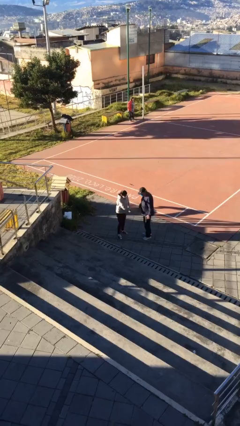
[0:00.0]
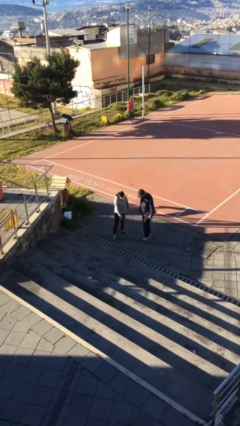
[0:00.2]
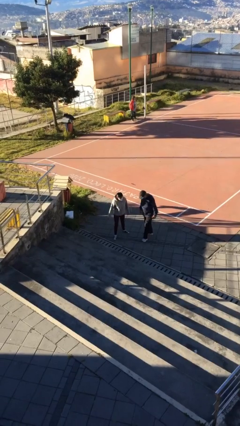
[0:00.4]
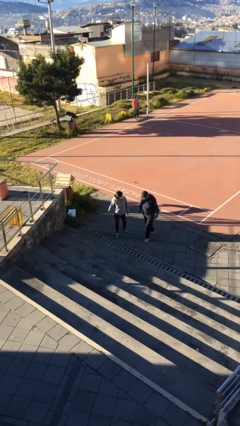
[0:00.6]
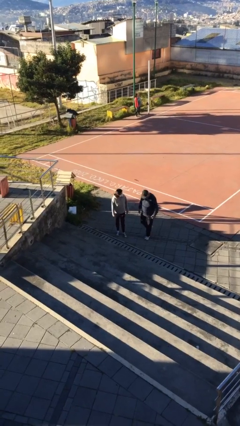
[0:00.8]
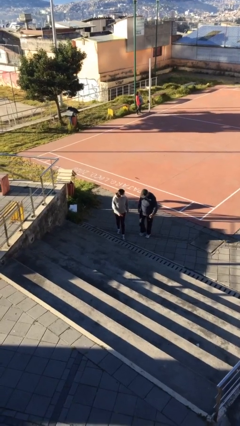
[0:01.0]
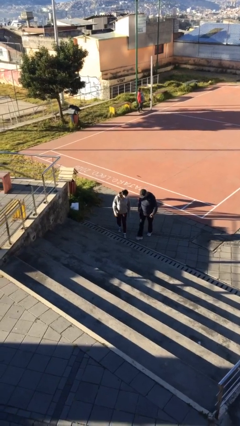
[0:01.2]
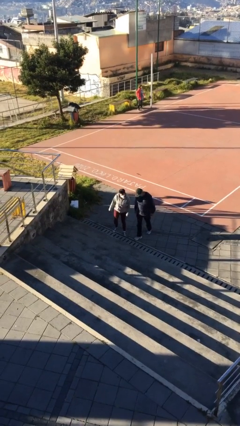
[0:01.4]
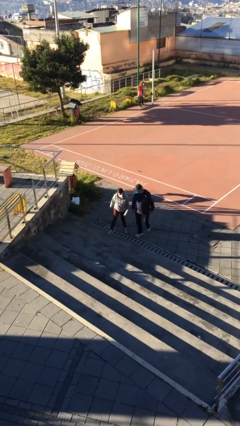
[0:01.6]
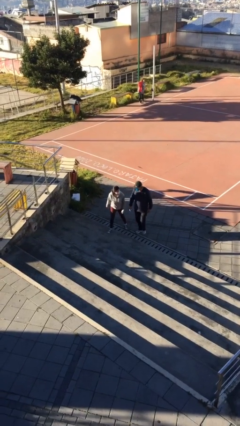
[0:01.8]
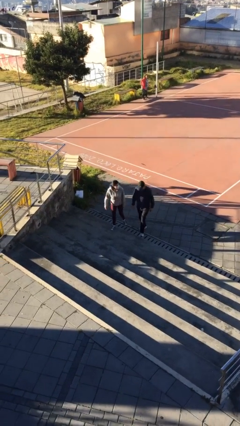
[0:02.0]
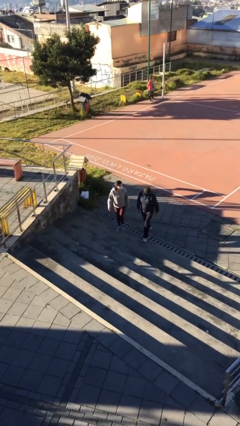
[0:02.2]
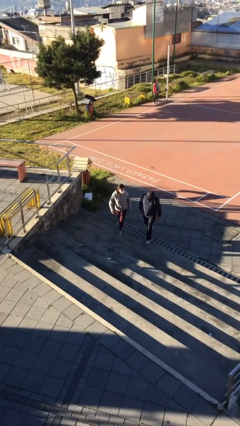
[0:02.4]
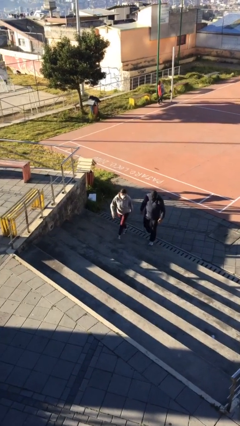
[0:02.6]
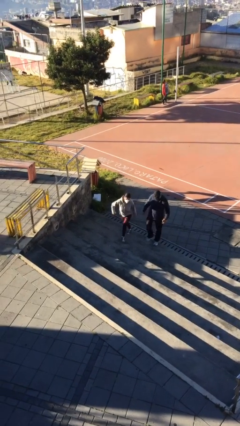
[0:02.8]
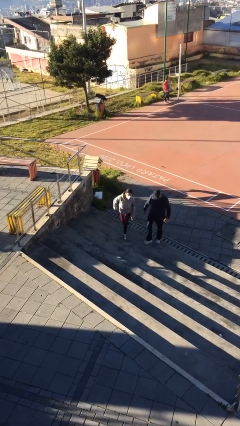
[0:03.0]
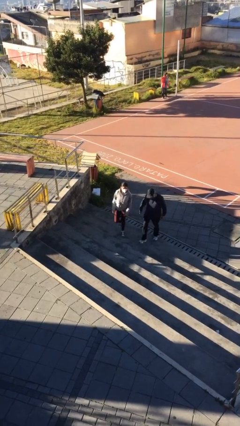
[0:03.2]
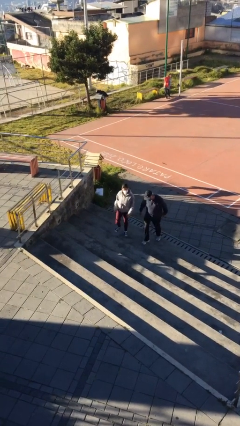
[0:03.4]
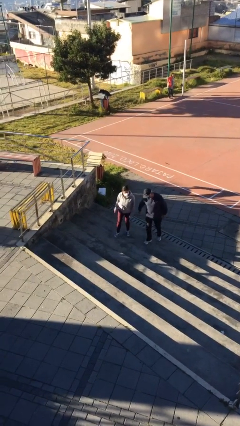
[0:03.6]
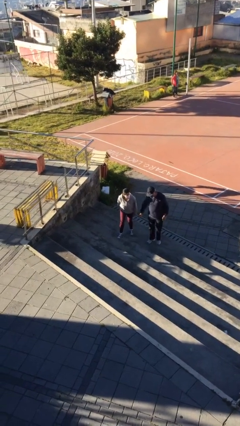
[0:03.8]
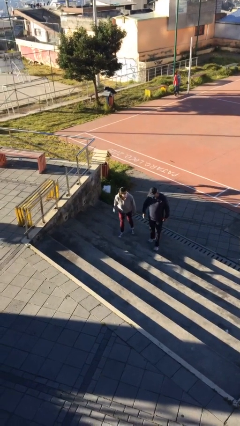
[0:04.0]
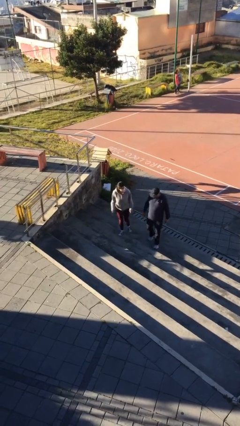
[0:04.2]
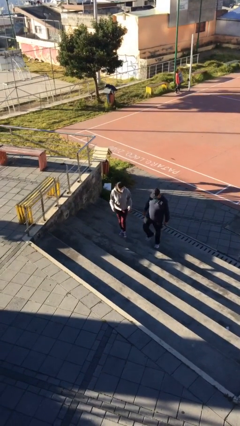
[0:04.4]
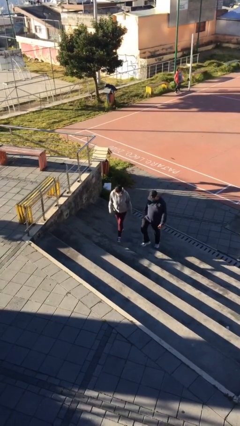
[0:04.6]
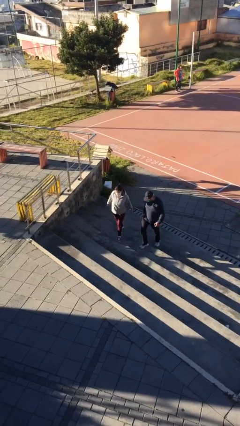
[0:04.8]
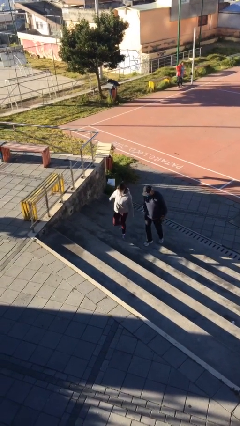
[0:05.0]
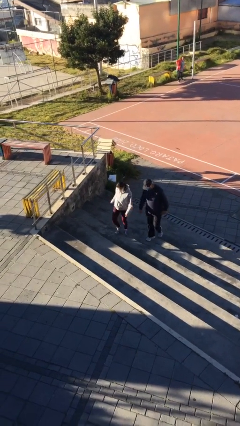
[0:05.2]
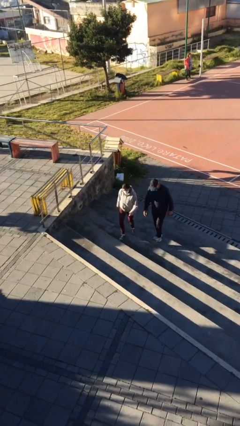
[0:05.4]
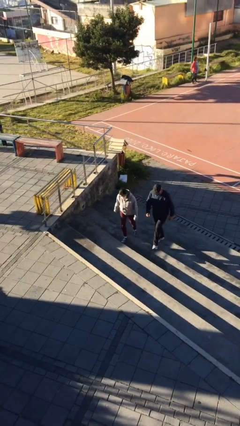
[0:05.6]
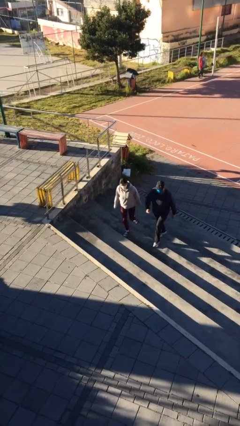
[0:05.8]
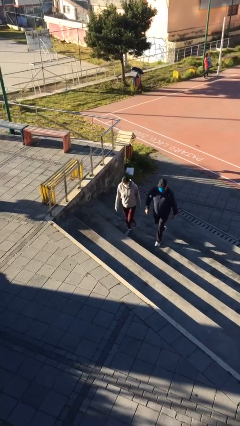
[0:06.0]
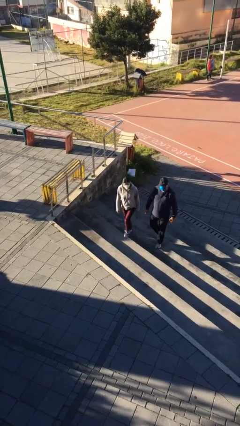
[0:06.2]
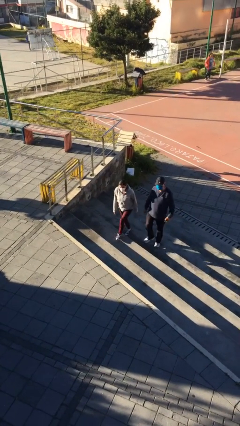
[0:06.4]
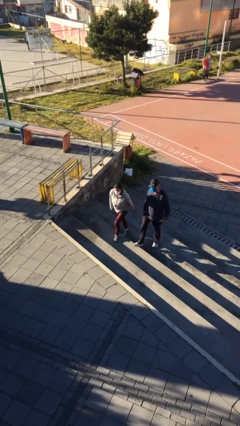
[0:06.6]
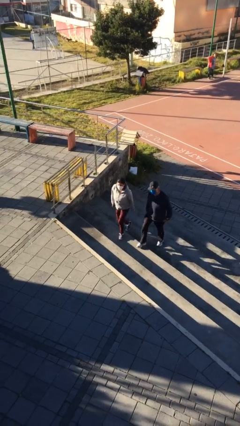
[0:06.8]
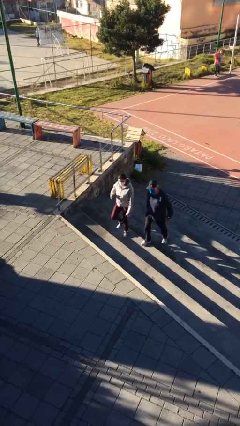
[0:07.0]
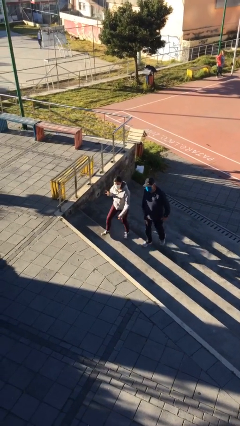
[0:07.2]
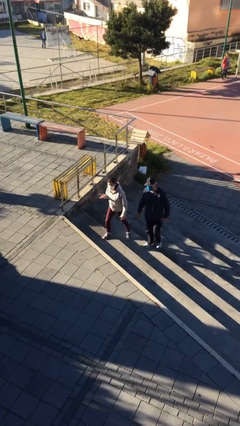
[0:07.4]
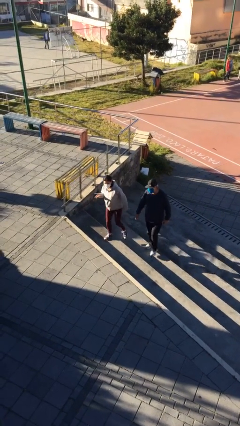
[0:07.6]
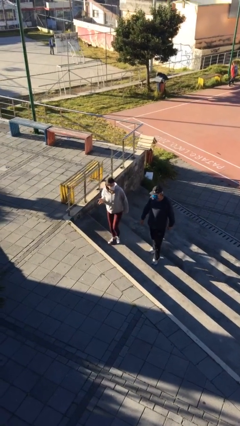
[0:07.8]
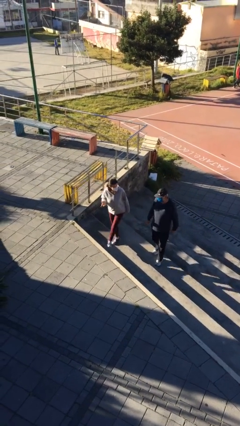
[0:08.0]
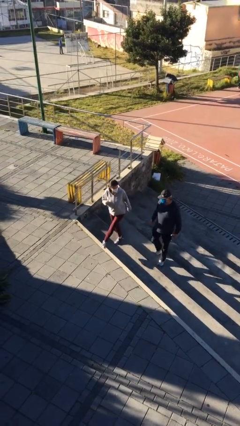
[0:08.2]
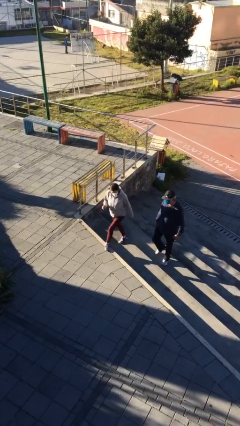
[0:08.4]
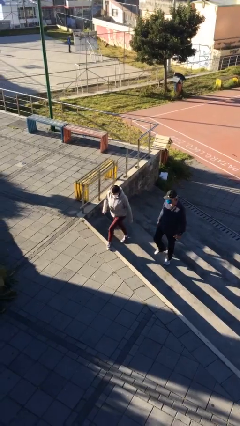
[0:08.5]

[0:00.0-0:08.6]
person talks to person

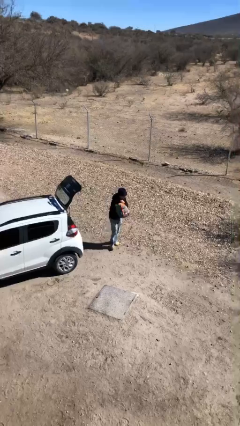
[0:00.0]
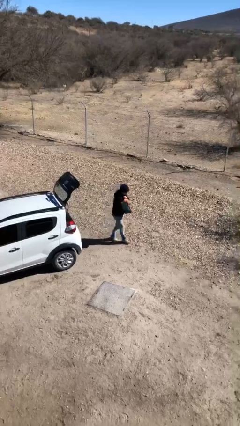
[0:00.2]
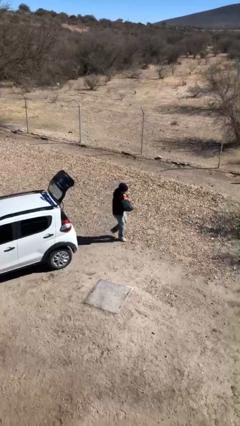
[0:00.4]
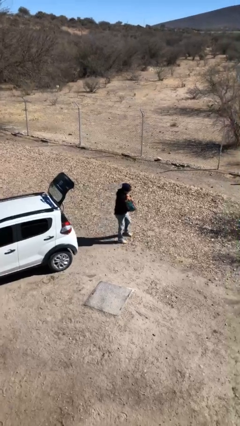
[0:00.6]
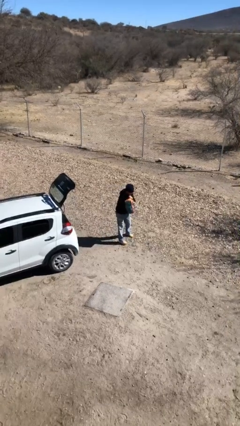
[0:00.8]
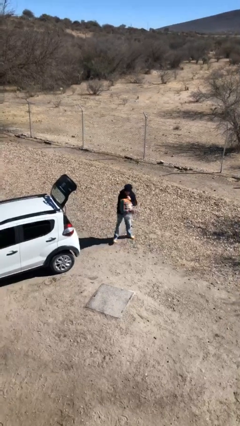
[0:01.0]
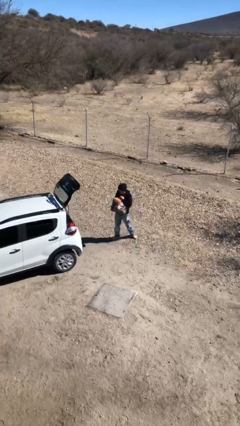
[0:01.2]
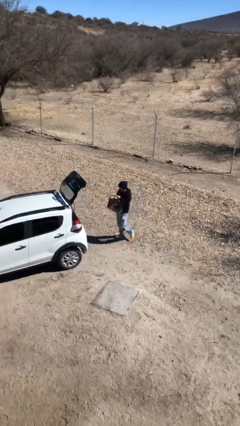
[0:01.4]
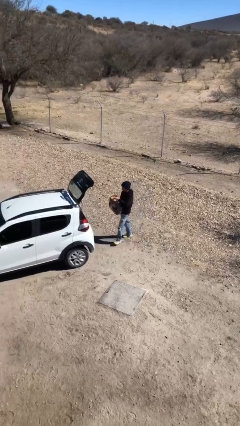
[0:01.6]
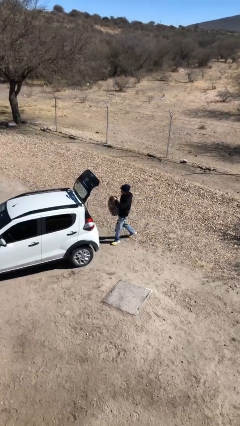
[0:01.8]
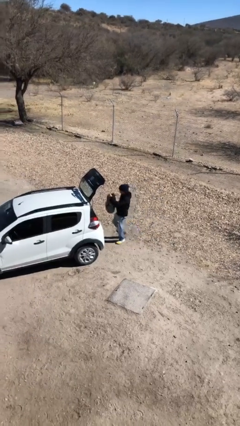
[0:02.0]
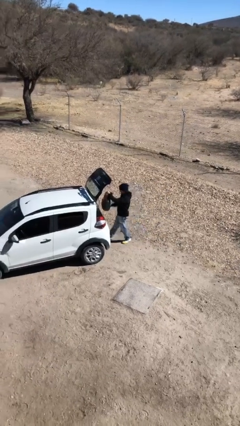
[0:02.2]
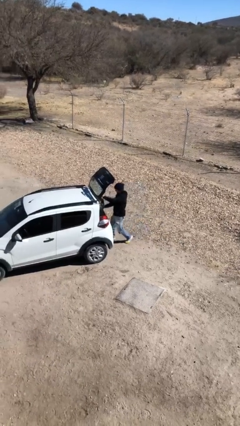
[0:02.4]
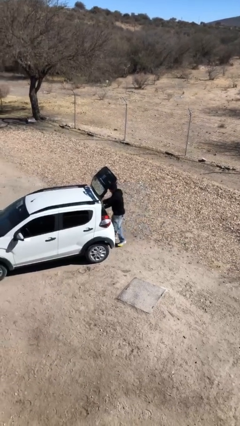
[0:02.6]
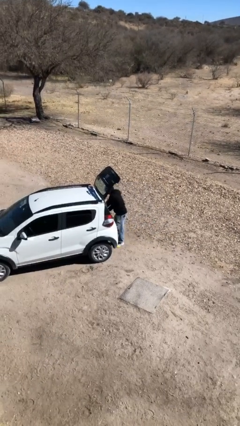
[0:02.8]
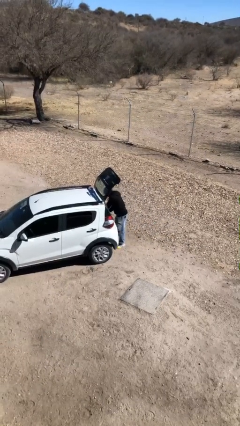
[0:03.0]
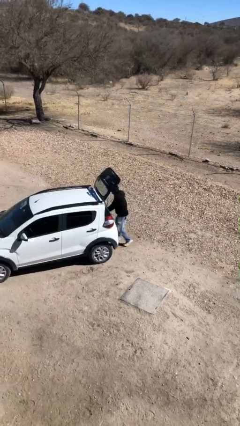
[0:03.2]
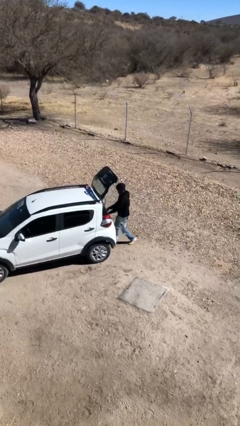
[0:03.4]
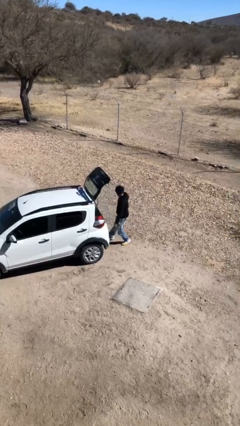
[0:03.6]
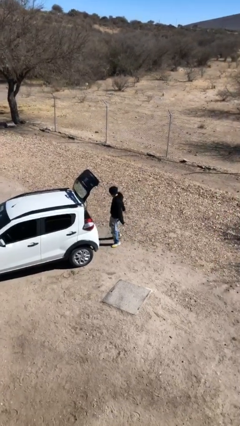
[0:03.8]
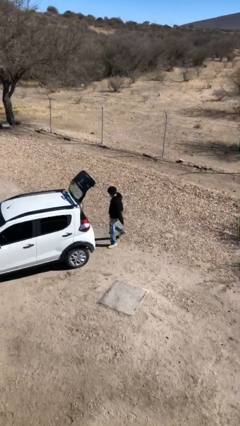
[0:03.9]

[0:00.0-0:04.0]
person loads car

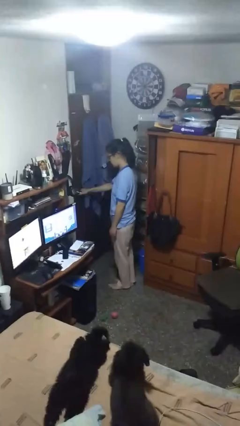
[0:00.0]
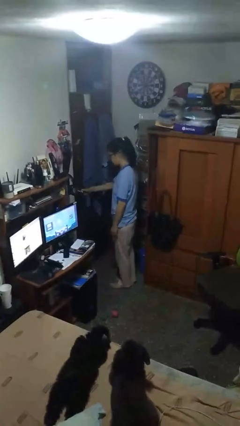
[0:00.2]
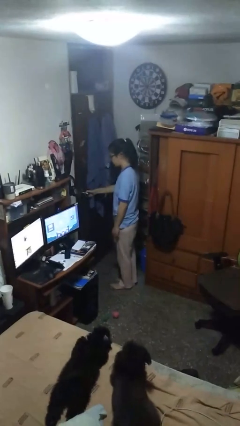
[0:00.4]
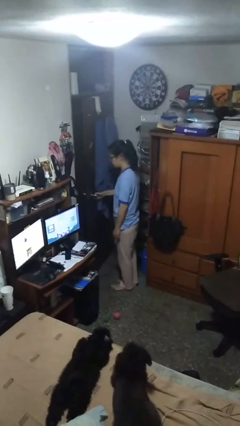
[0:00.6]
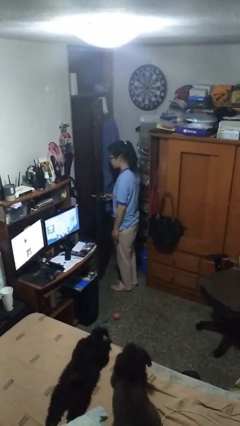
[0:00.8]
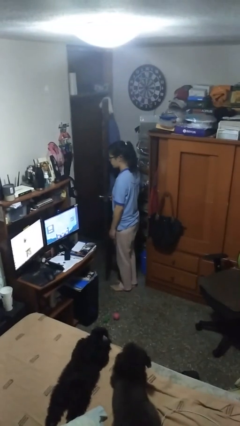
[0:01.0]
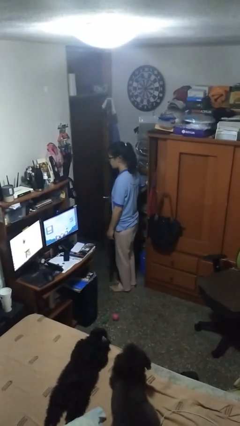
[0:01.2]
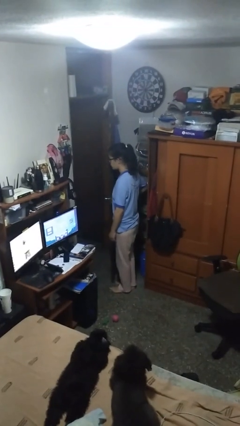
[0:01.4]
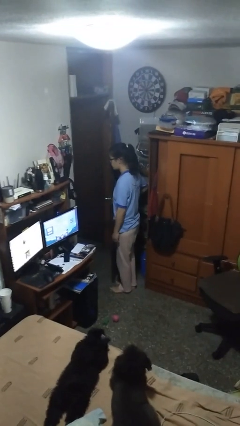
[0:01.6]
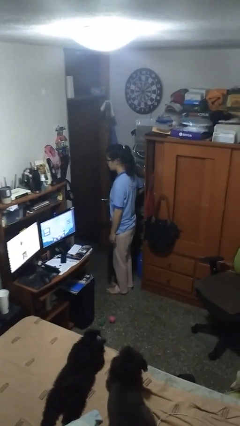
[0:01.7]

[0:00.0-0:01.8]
person opens facility door

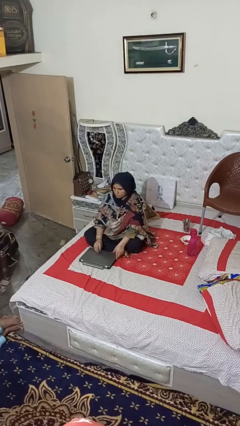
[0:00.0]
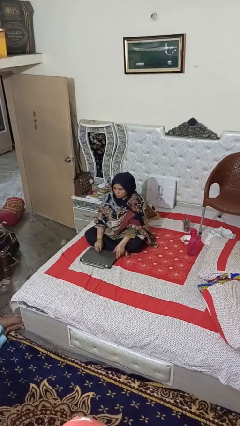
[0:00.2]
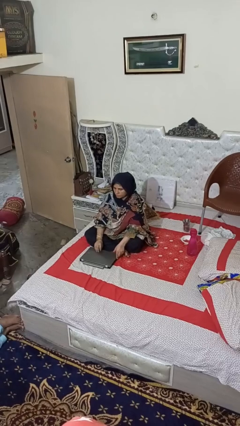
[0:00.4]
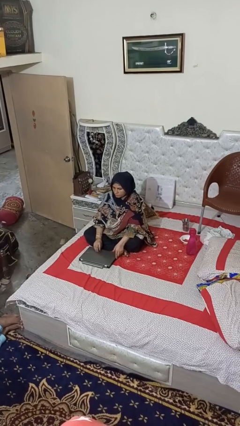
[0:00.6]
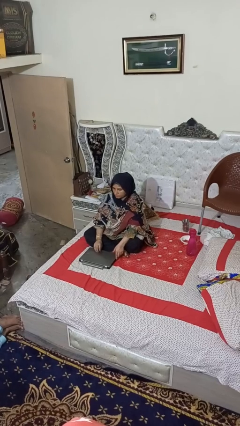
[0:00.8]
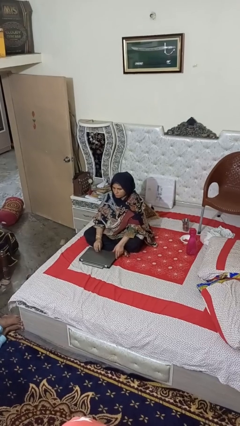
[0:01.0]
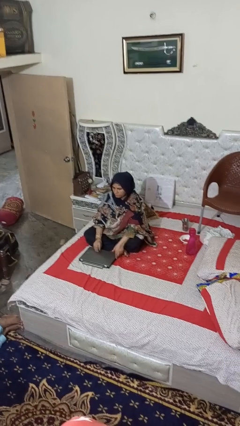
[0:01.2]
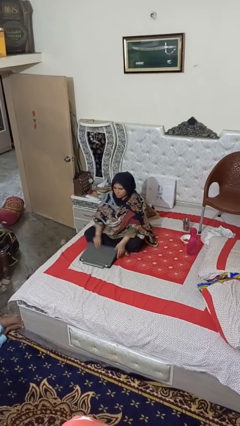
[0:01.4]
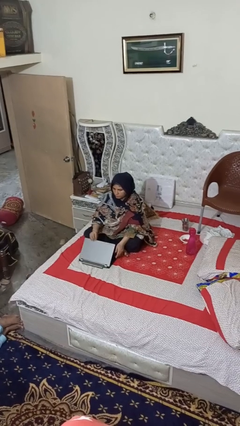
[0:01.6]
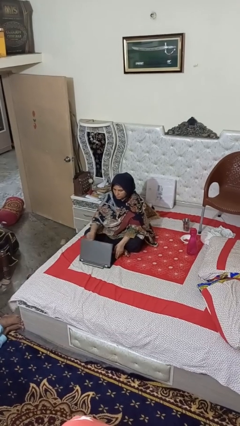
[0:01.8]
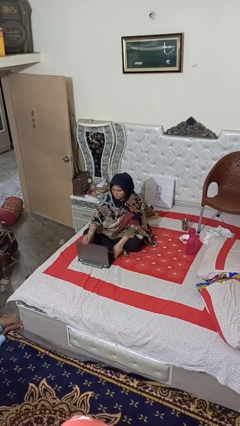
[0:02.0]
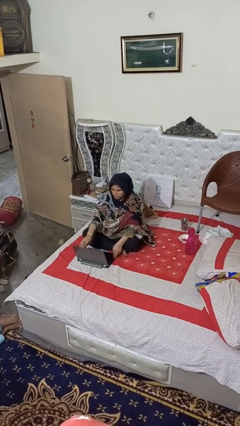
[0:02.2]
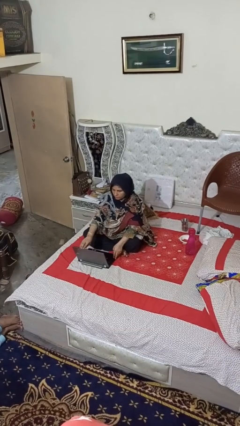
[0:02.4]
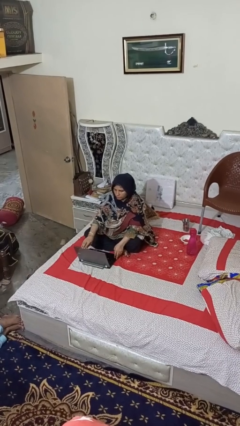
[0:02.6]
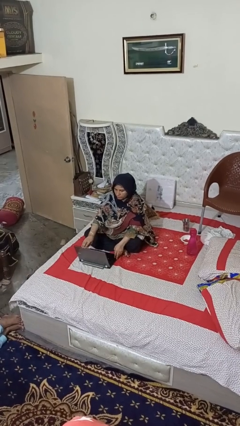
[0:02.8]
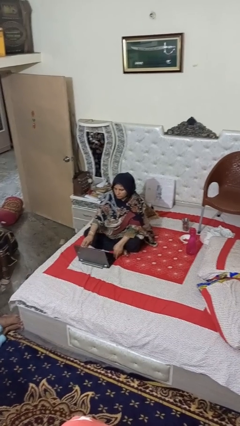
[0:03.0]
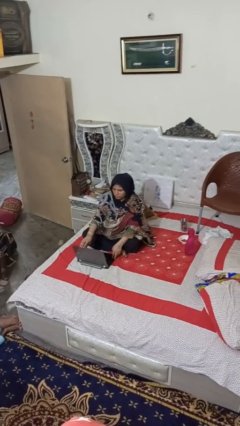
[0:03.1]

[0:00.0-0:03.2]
person opens laptop
